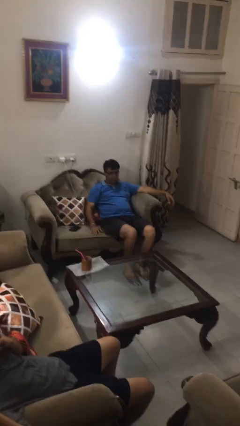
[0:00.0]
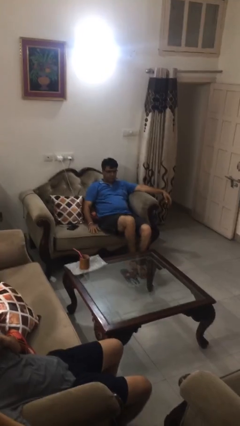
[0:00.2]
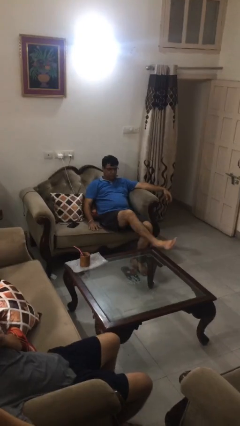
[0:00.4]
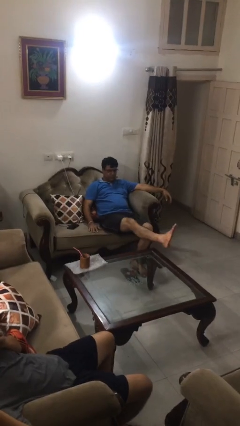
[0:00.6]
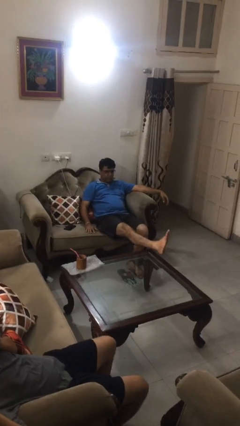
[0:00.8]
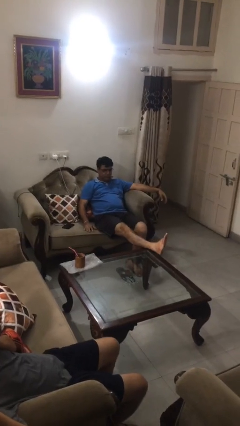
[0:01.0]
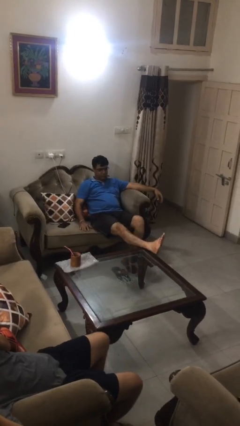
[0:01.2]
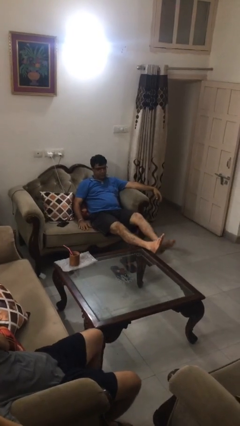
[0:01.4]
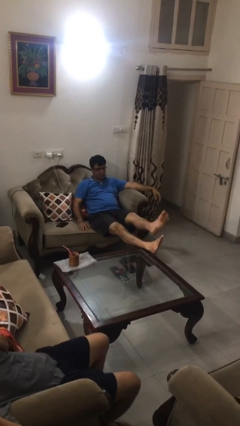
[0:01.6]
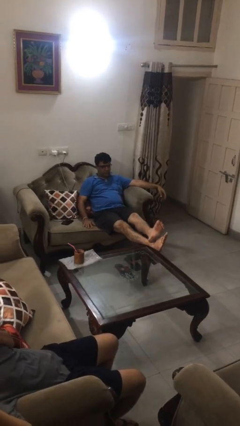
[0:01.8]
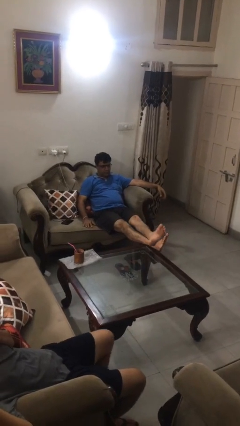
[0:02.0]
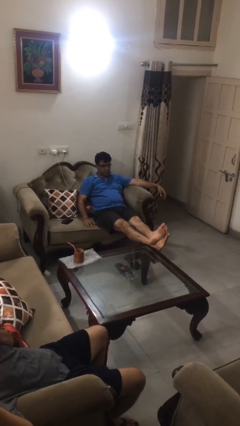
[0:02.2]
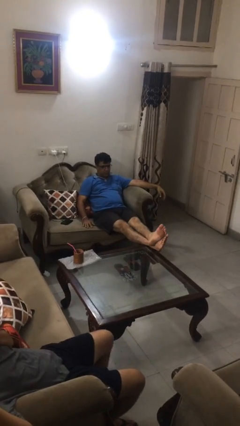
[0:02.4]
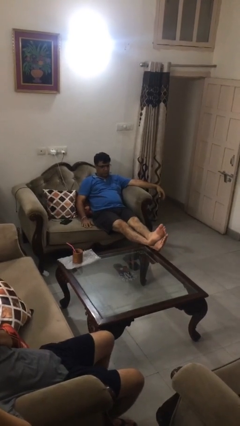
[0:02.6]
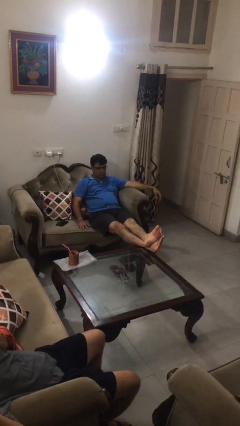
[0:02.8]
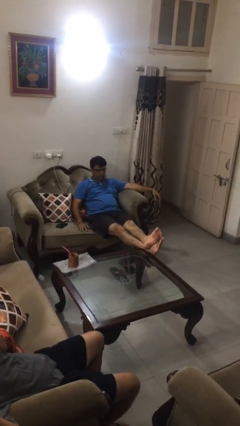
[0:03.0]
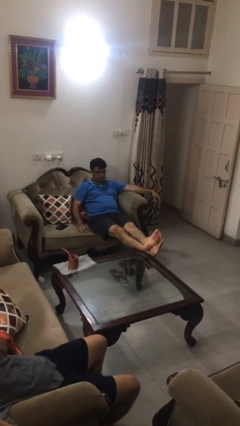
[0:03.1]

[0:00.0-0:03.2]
person puts feet up

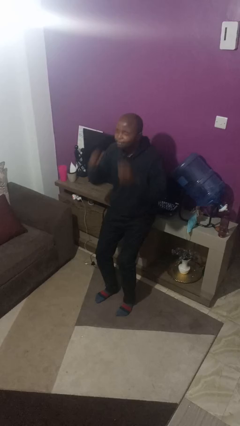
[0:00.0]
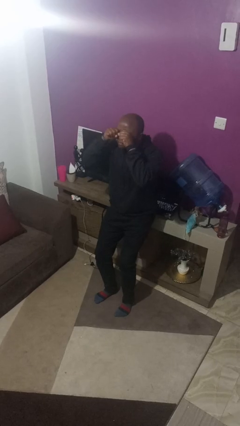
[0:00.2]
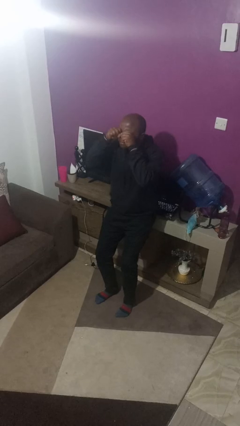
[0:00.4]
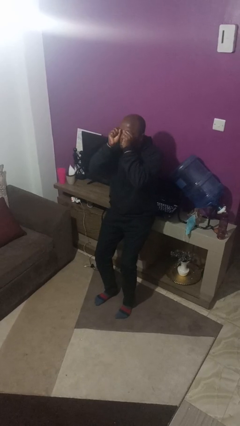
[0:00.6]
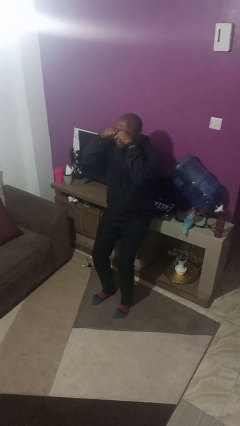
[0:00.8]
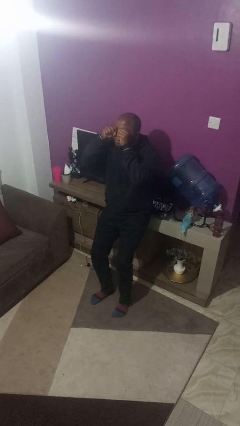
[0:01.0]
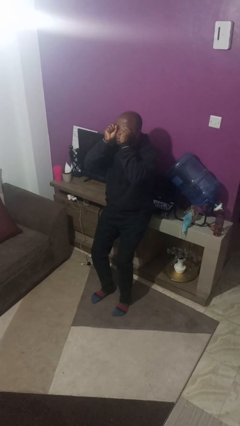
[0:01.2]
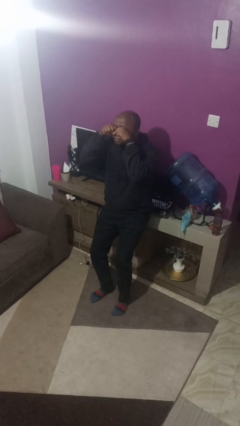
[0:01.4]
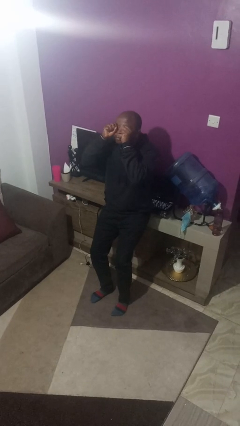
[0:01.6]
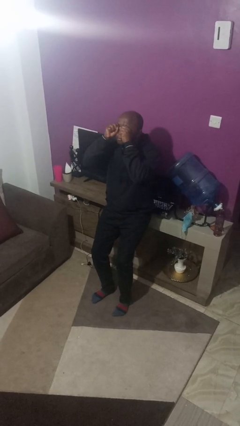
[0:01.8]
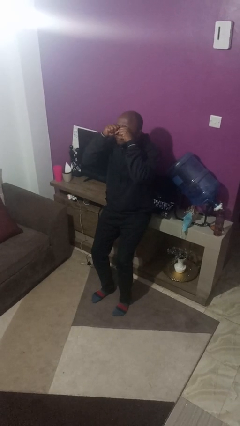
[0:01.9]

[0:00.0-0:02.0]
person rubs eyes

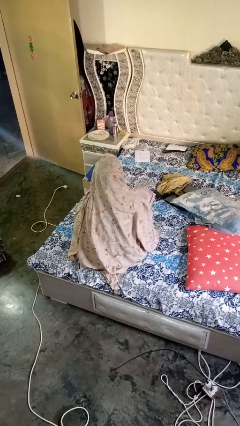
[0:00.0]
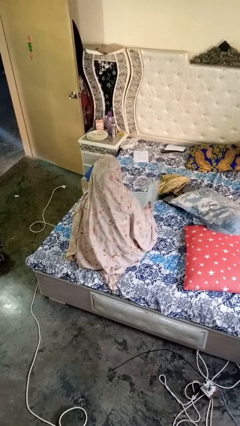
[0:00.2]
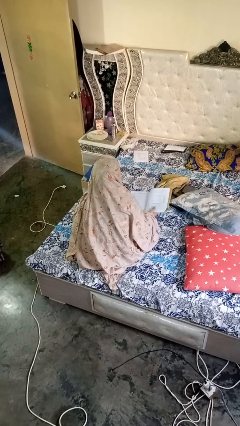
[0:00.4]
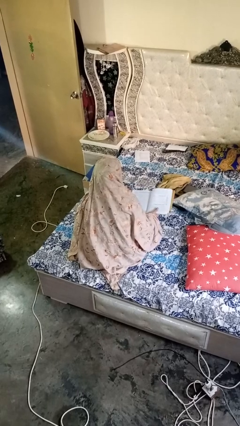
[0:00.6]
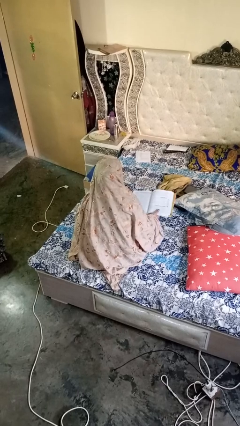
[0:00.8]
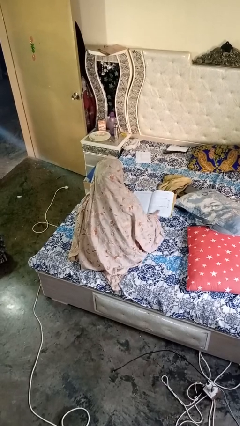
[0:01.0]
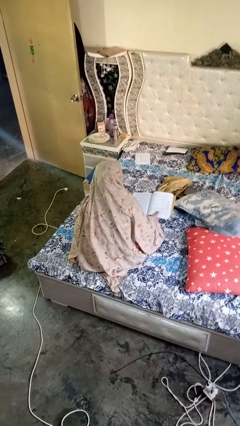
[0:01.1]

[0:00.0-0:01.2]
person reads book

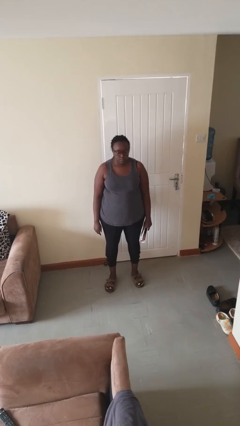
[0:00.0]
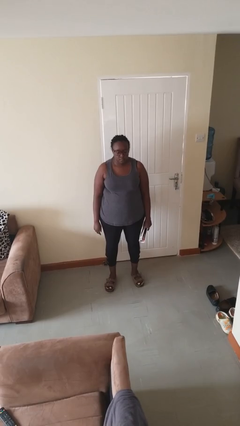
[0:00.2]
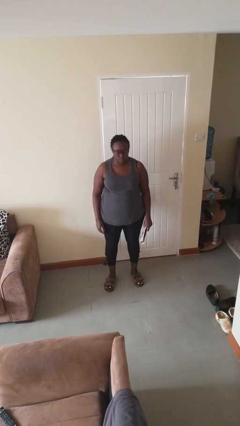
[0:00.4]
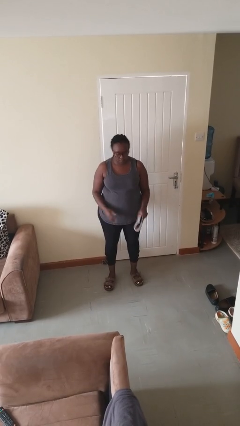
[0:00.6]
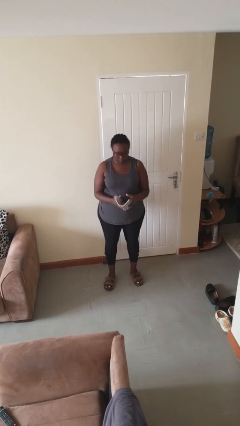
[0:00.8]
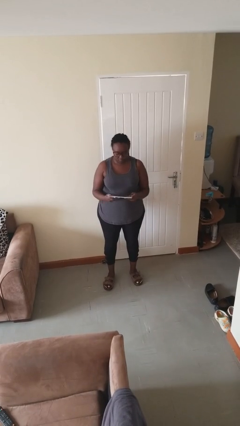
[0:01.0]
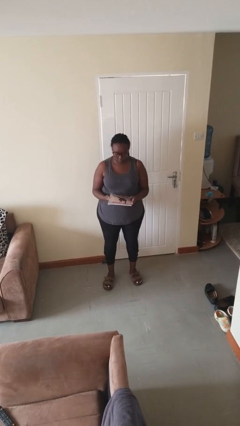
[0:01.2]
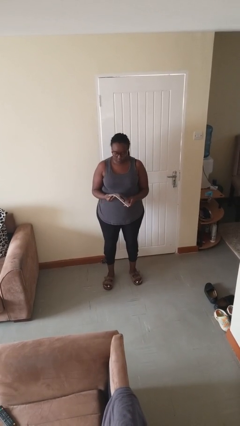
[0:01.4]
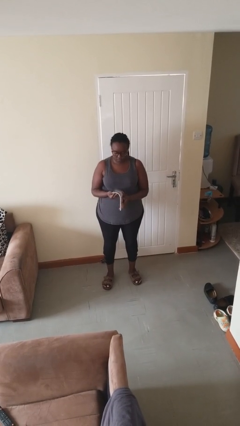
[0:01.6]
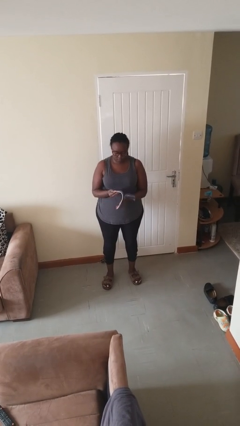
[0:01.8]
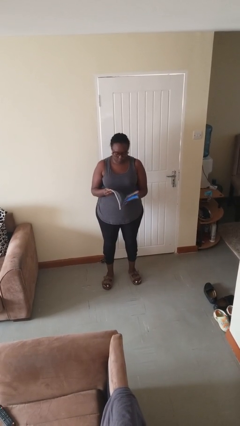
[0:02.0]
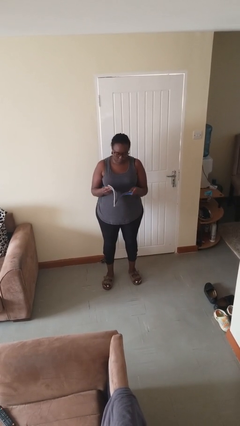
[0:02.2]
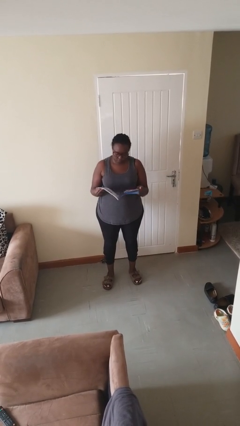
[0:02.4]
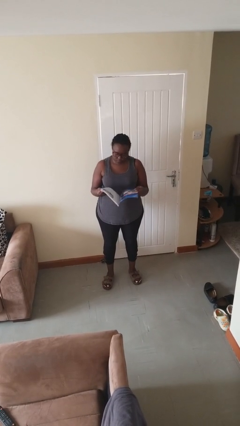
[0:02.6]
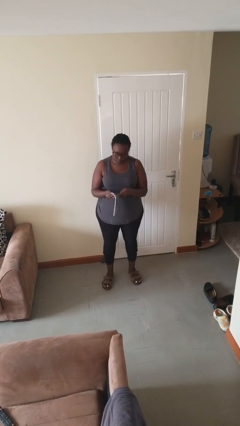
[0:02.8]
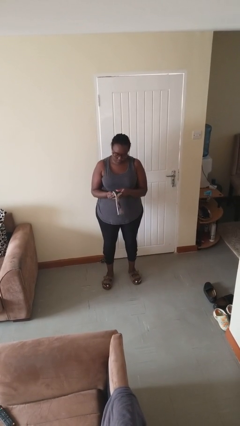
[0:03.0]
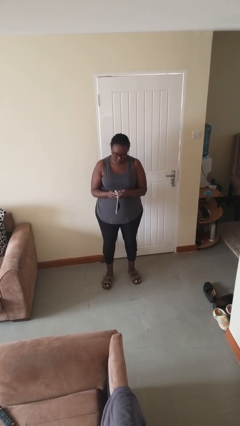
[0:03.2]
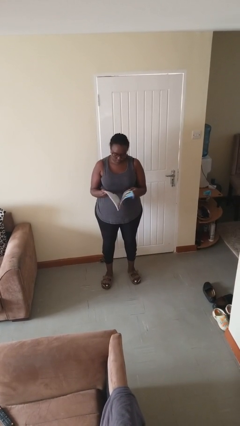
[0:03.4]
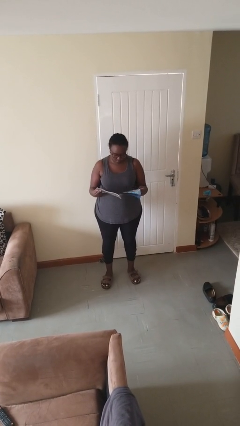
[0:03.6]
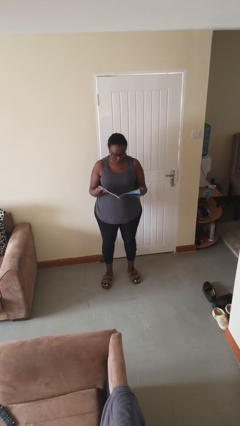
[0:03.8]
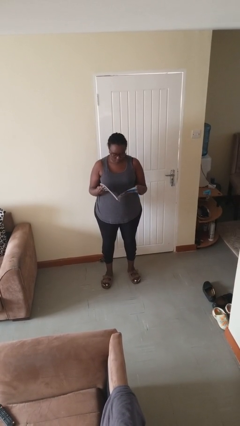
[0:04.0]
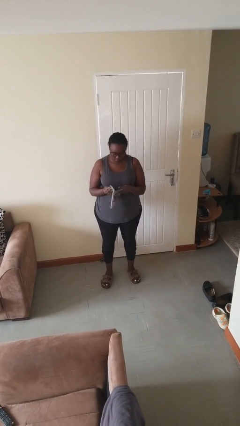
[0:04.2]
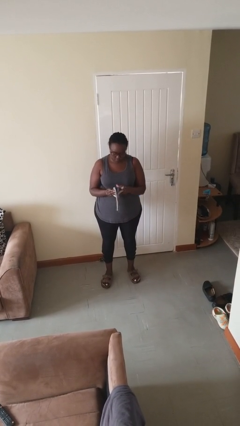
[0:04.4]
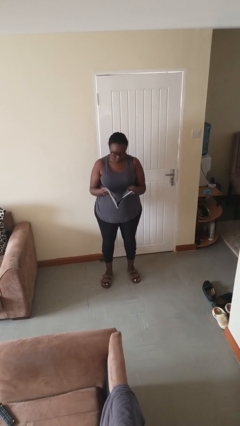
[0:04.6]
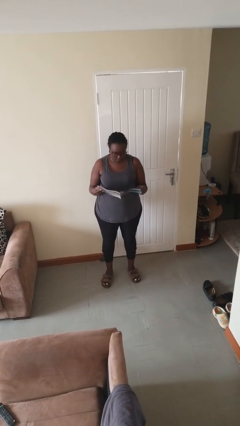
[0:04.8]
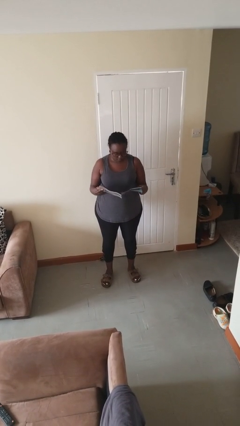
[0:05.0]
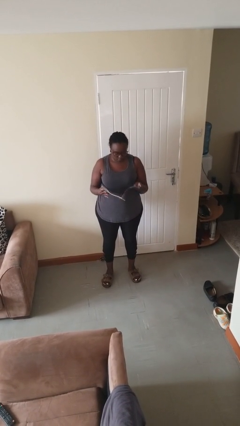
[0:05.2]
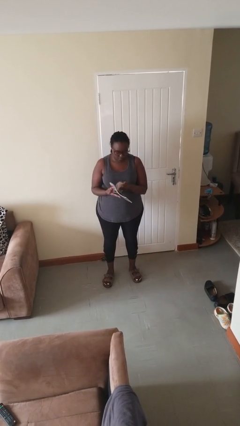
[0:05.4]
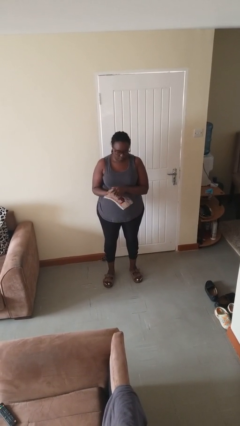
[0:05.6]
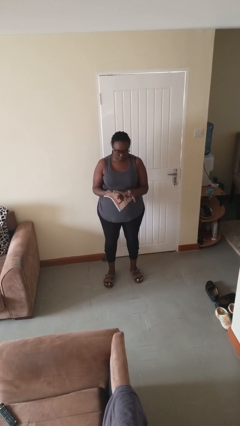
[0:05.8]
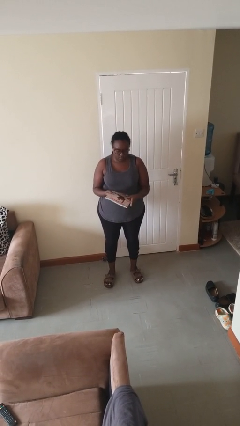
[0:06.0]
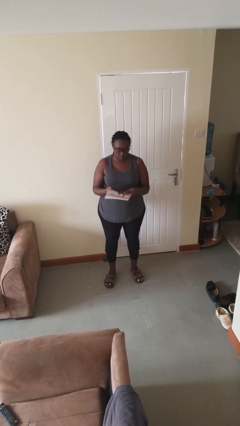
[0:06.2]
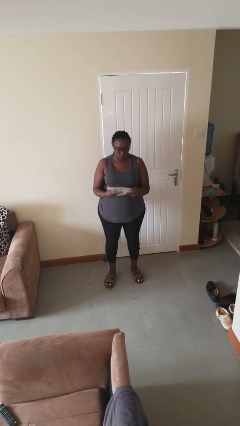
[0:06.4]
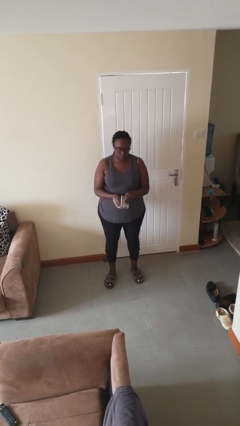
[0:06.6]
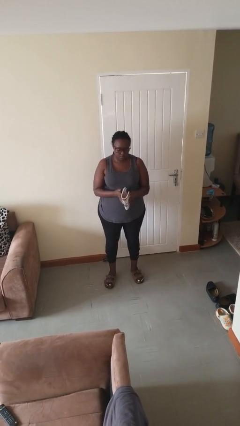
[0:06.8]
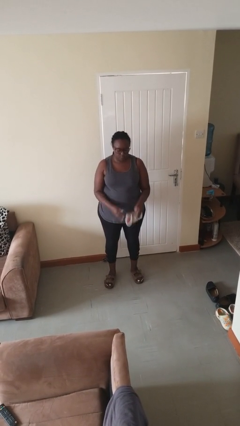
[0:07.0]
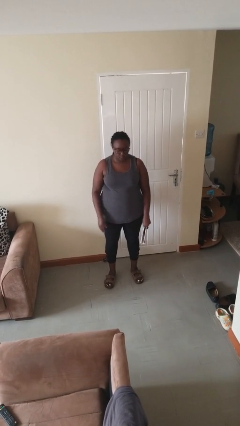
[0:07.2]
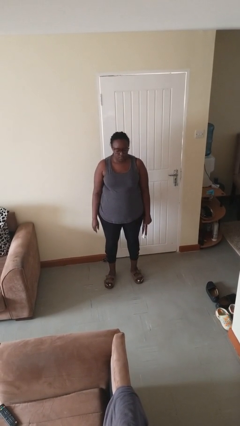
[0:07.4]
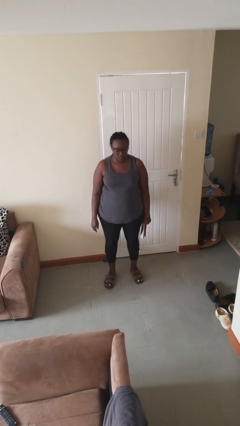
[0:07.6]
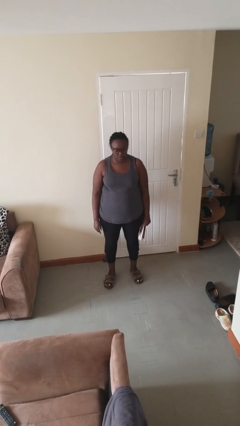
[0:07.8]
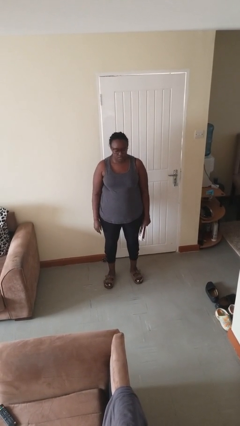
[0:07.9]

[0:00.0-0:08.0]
person reads magazine

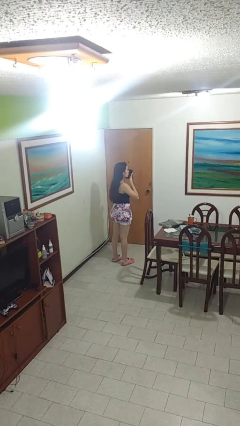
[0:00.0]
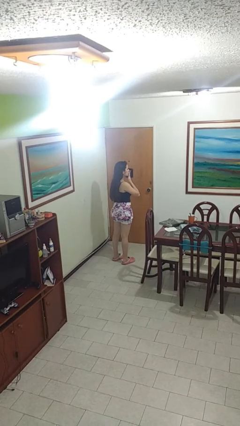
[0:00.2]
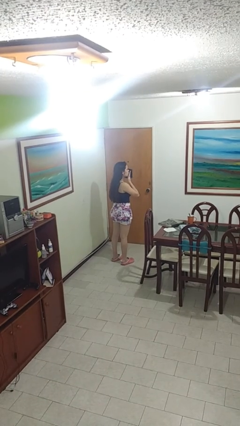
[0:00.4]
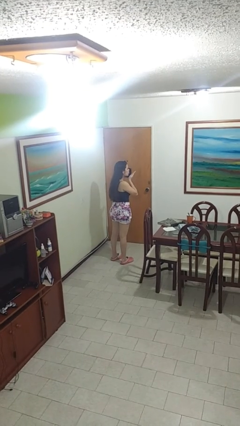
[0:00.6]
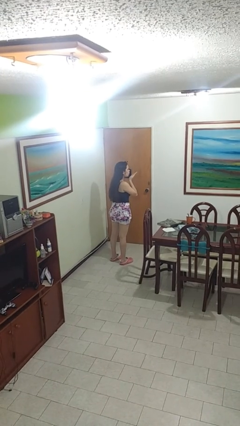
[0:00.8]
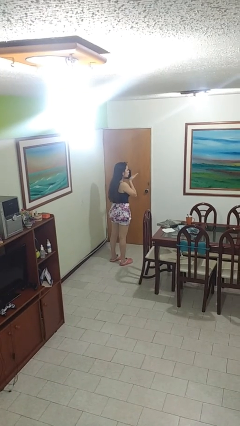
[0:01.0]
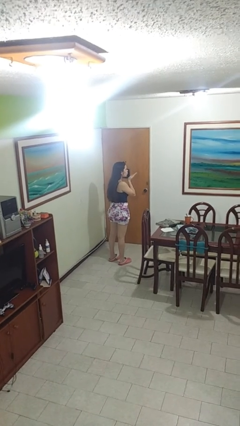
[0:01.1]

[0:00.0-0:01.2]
person gestures blow kiss

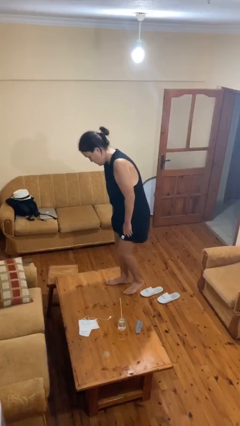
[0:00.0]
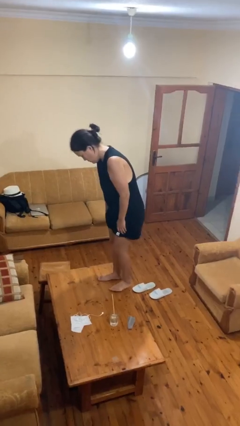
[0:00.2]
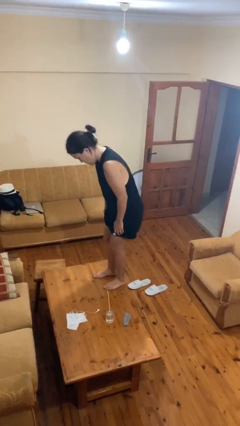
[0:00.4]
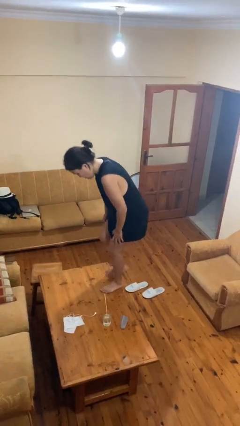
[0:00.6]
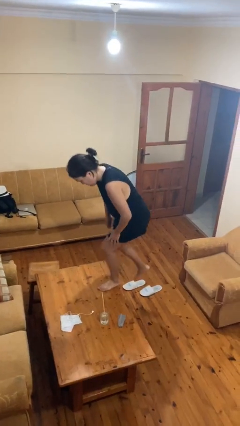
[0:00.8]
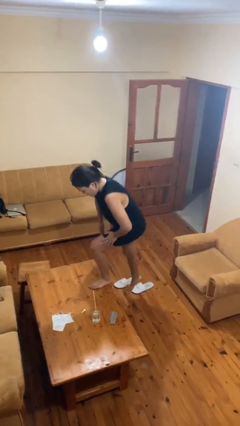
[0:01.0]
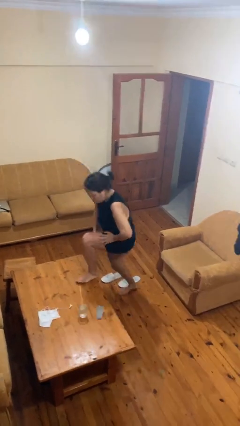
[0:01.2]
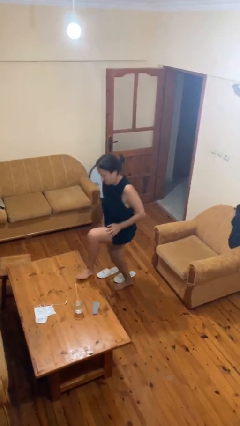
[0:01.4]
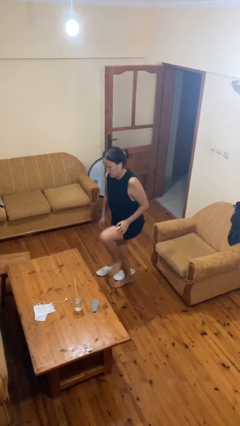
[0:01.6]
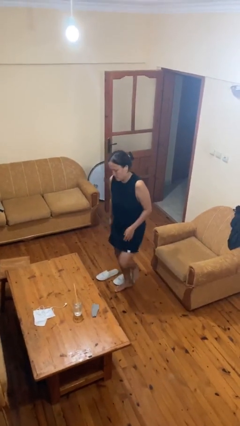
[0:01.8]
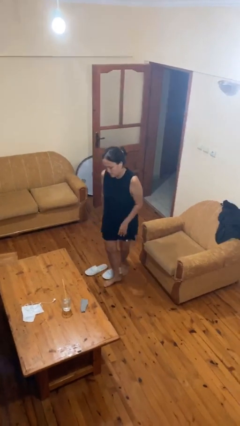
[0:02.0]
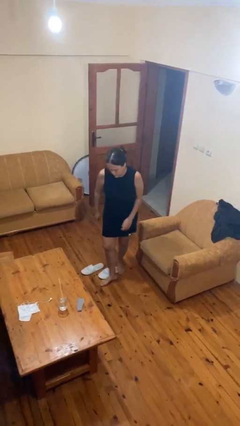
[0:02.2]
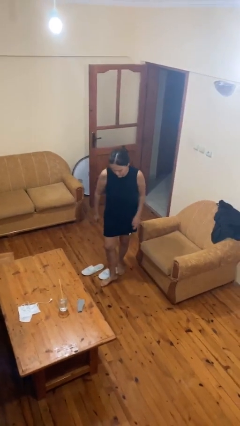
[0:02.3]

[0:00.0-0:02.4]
person climbs off table
